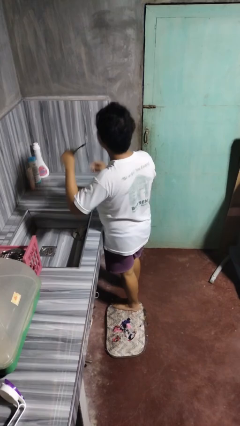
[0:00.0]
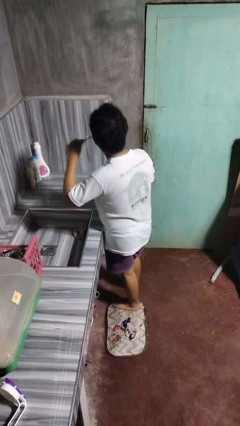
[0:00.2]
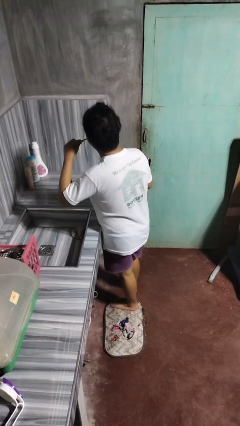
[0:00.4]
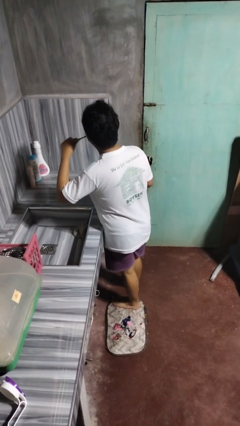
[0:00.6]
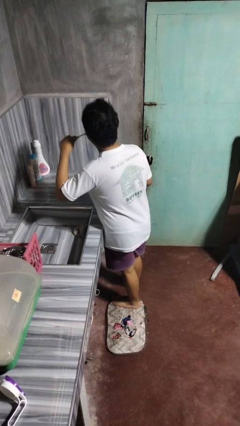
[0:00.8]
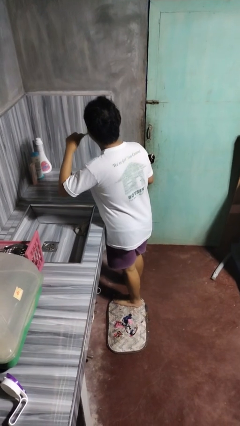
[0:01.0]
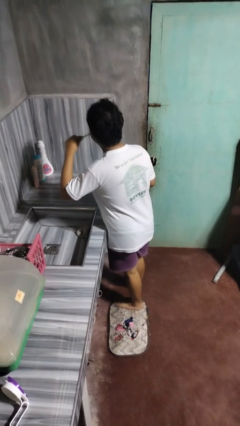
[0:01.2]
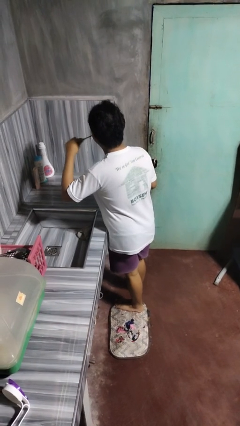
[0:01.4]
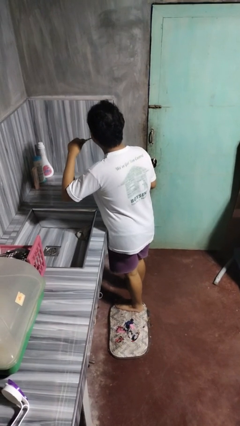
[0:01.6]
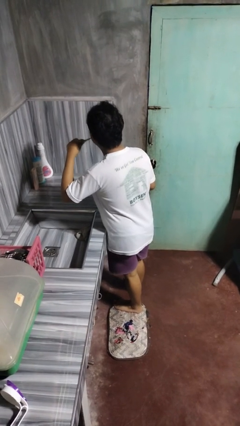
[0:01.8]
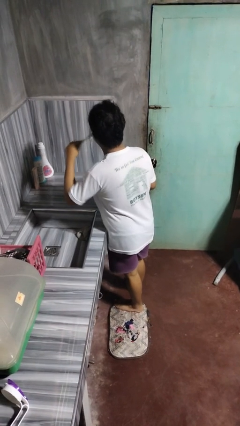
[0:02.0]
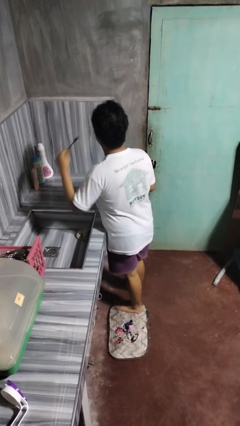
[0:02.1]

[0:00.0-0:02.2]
person brushes teeth

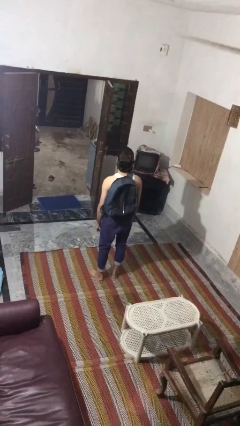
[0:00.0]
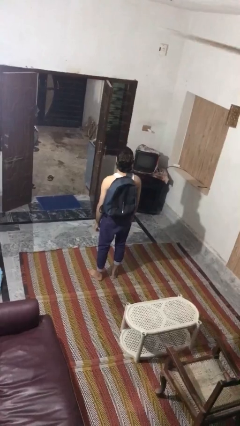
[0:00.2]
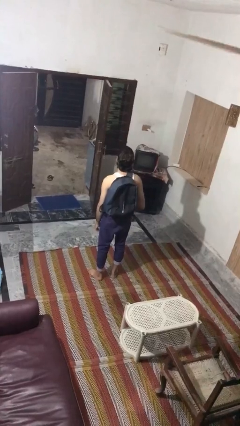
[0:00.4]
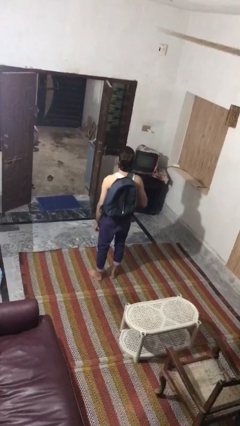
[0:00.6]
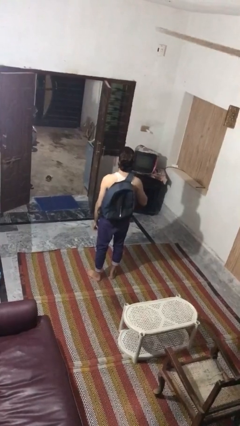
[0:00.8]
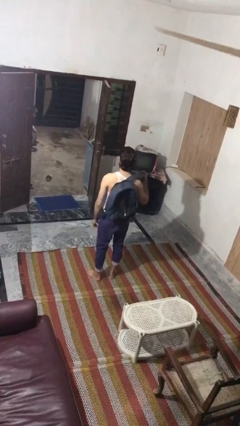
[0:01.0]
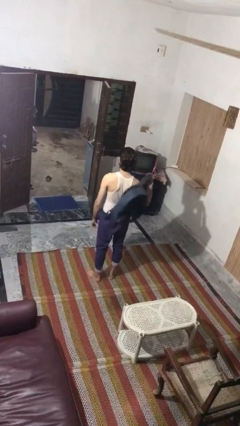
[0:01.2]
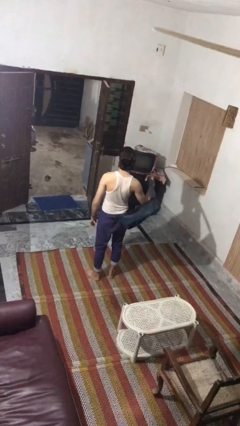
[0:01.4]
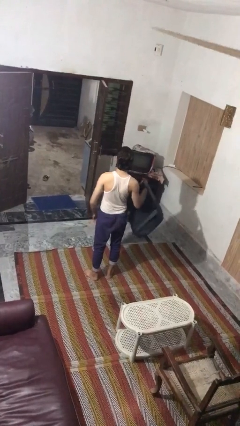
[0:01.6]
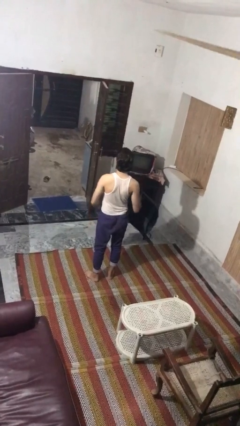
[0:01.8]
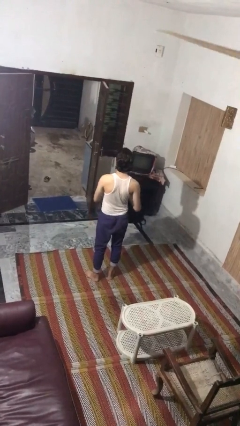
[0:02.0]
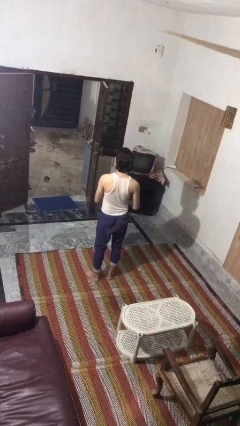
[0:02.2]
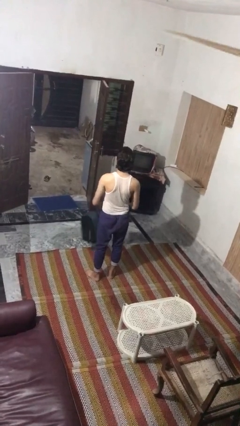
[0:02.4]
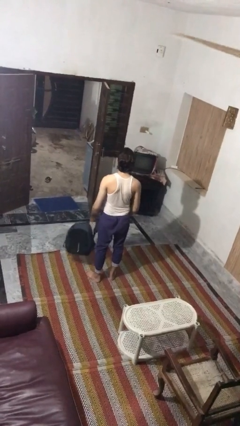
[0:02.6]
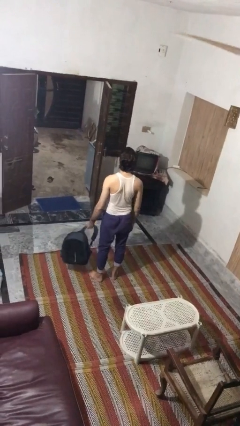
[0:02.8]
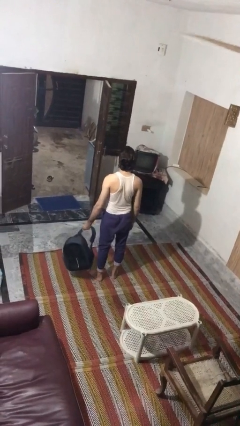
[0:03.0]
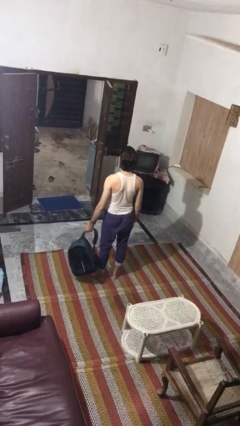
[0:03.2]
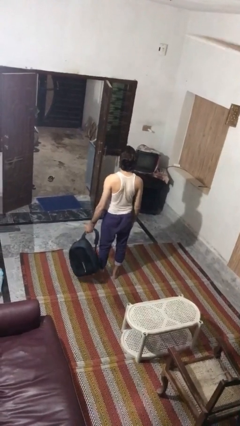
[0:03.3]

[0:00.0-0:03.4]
person takes off backpack

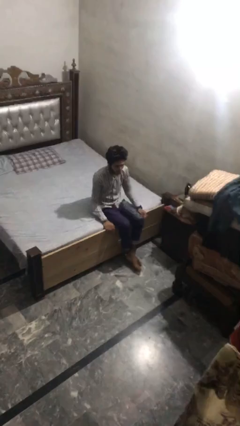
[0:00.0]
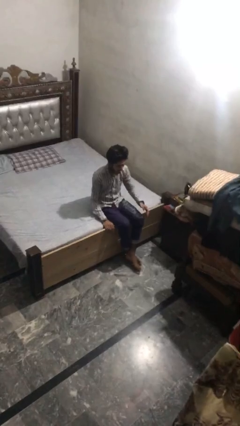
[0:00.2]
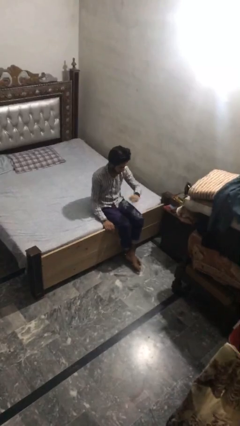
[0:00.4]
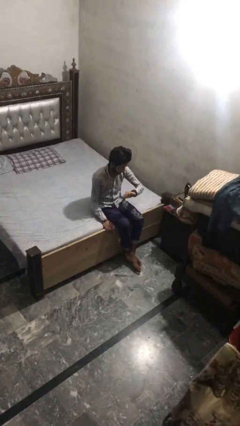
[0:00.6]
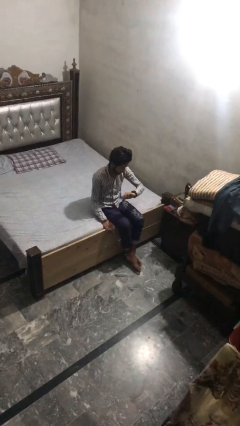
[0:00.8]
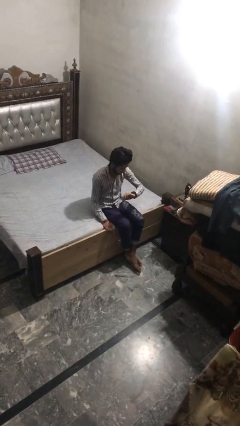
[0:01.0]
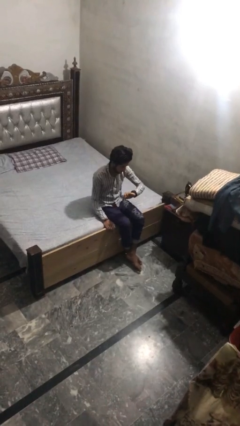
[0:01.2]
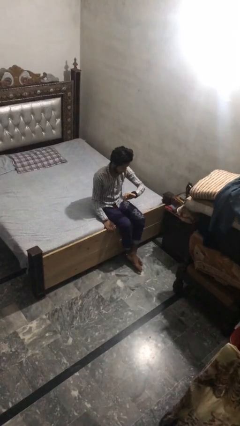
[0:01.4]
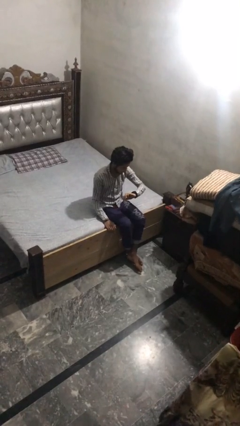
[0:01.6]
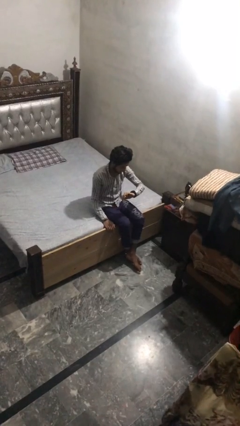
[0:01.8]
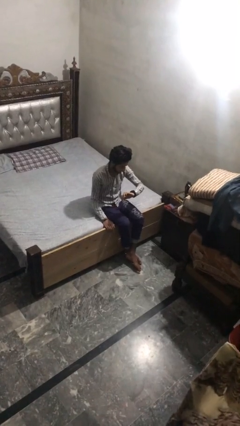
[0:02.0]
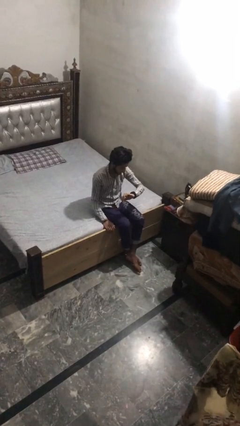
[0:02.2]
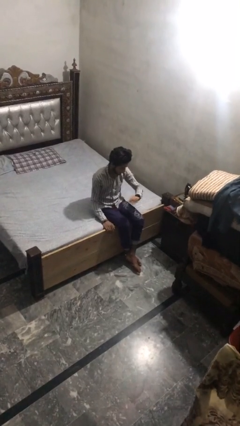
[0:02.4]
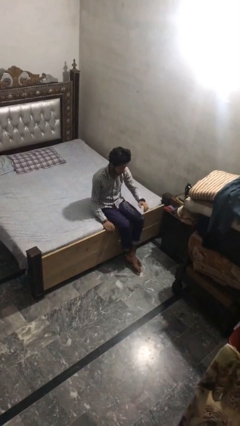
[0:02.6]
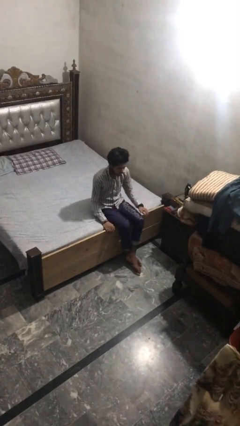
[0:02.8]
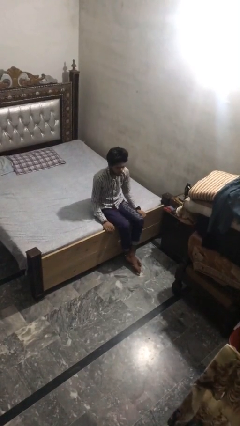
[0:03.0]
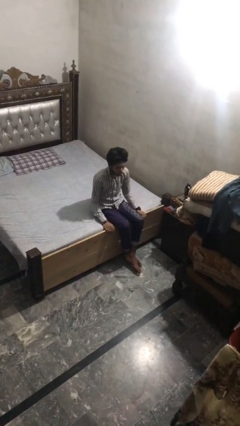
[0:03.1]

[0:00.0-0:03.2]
person looks at wristwatch

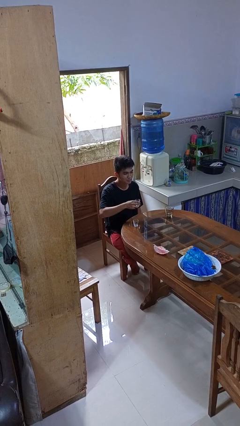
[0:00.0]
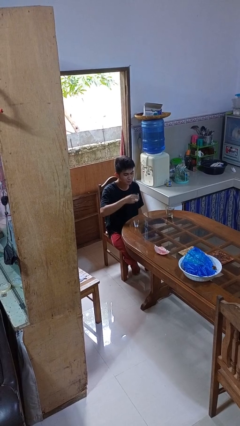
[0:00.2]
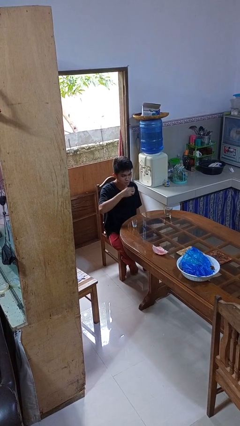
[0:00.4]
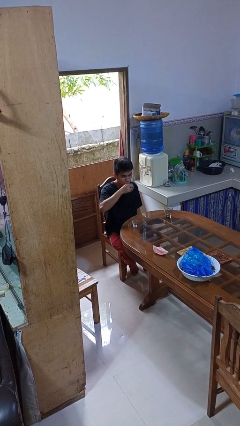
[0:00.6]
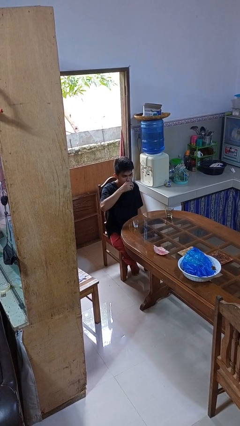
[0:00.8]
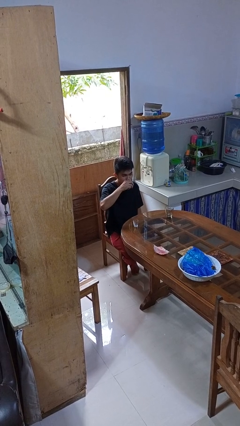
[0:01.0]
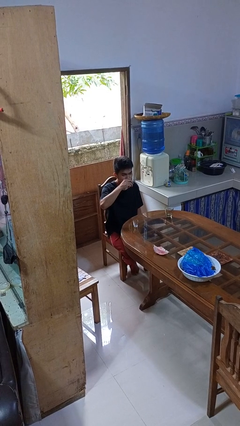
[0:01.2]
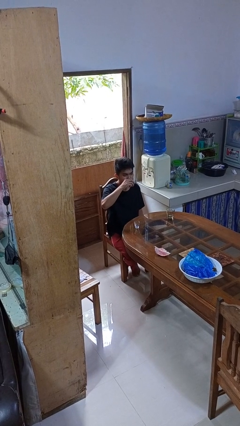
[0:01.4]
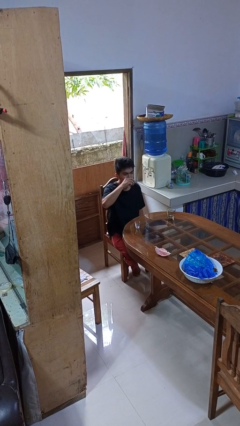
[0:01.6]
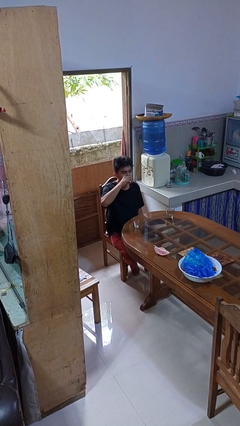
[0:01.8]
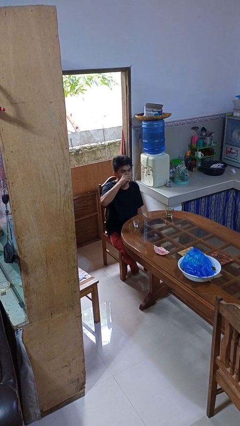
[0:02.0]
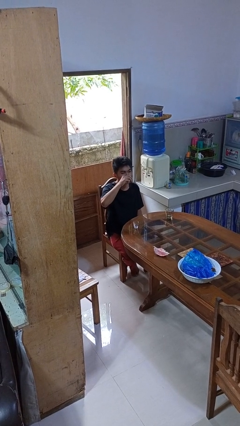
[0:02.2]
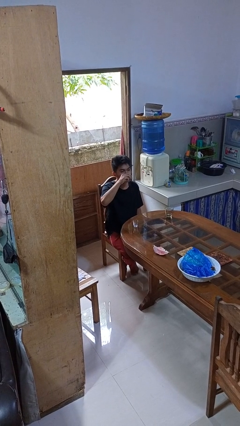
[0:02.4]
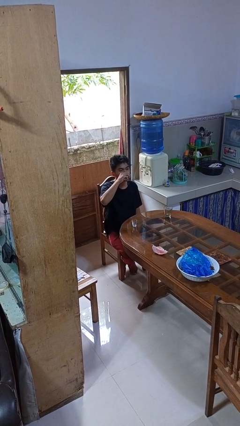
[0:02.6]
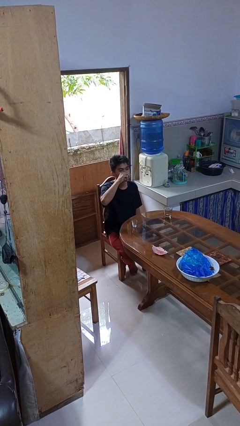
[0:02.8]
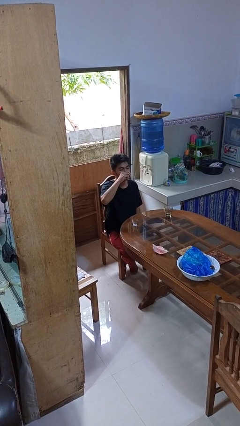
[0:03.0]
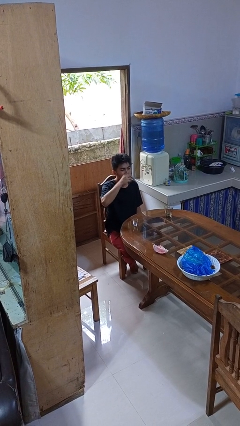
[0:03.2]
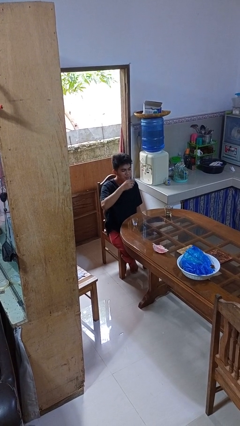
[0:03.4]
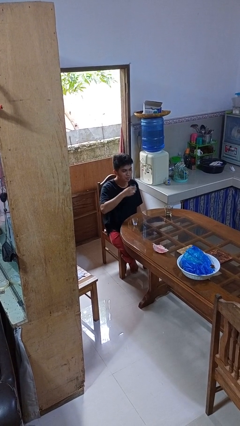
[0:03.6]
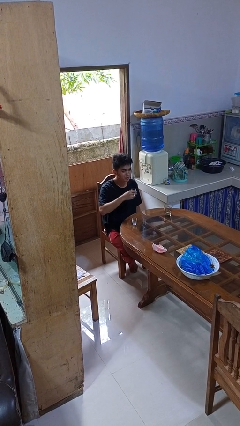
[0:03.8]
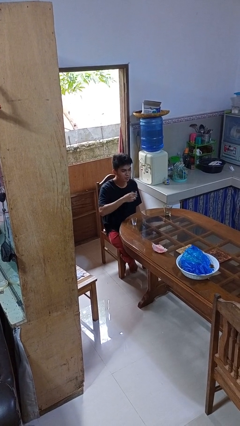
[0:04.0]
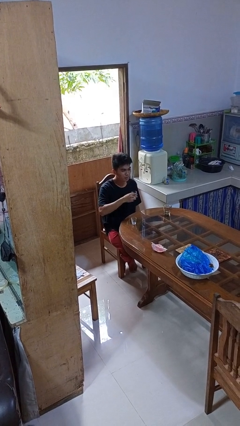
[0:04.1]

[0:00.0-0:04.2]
person drinks from shotglass

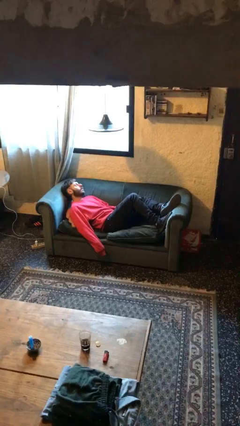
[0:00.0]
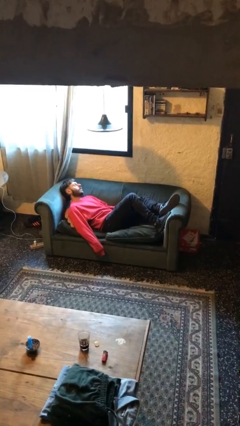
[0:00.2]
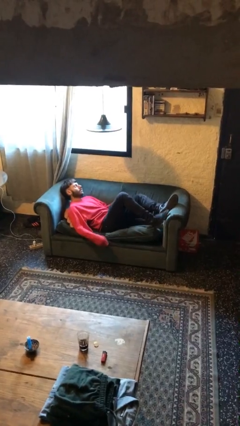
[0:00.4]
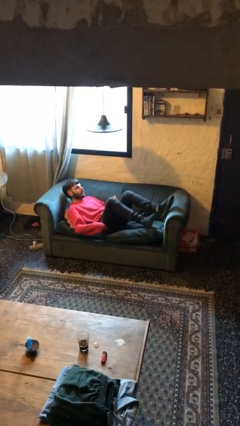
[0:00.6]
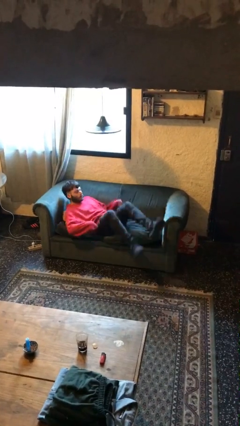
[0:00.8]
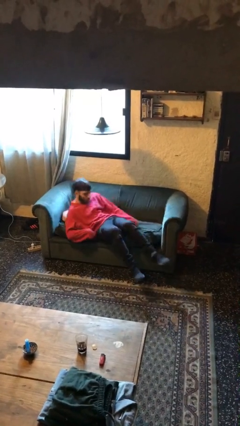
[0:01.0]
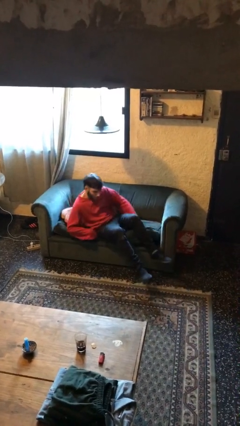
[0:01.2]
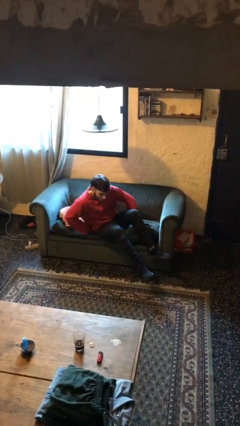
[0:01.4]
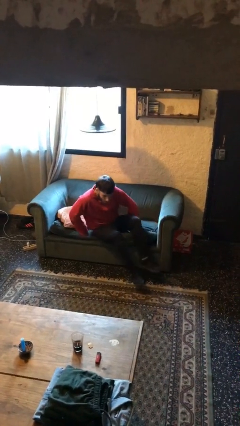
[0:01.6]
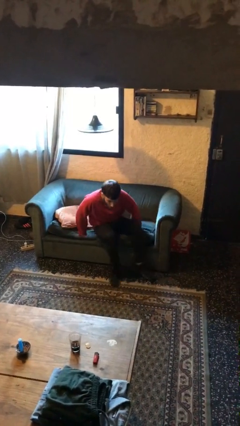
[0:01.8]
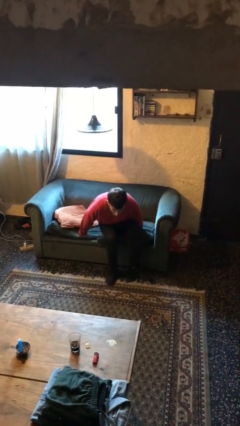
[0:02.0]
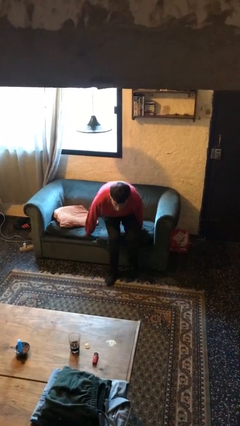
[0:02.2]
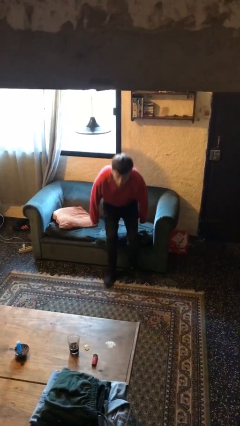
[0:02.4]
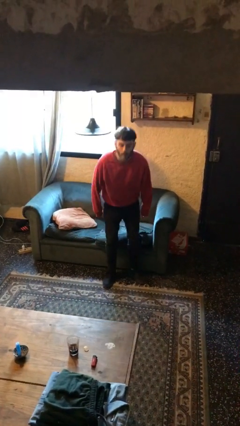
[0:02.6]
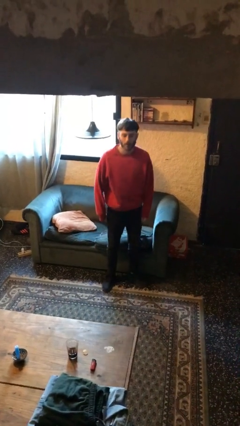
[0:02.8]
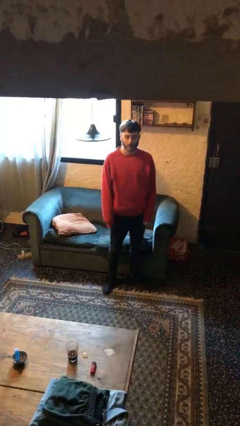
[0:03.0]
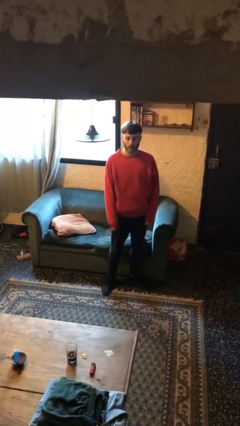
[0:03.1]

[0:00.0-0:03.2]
person stands up

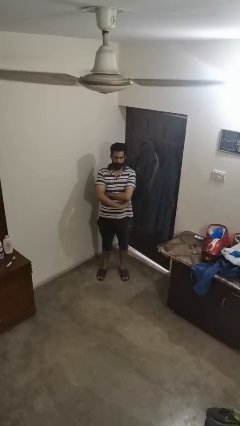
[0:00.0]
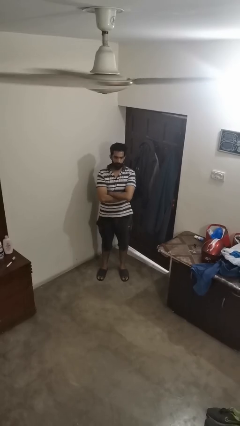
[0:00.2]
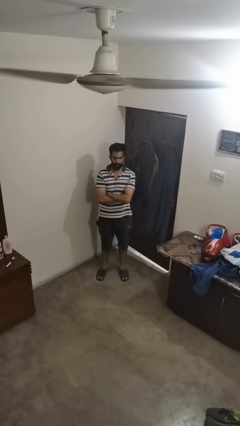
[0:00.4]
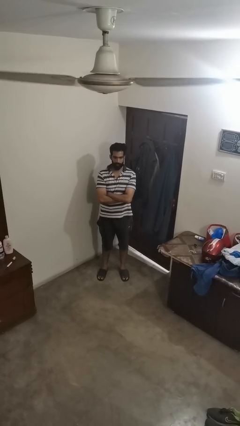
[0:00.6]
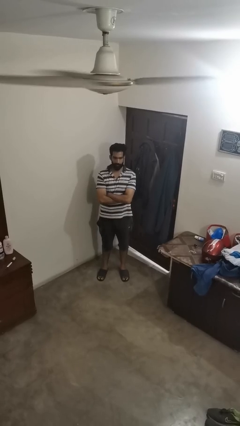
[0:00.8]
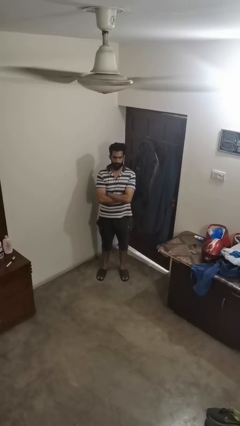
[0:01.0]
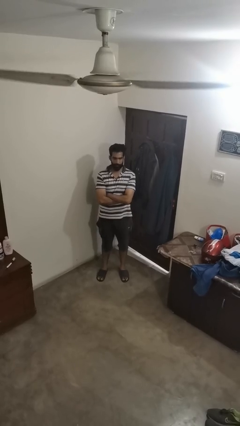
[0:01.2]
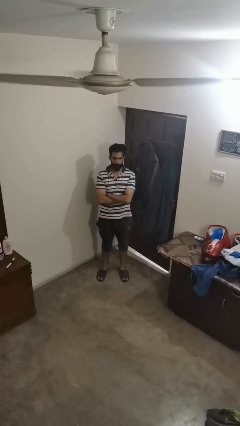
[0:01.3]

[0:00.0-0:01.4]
person crosses arms
